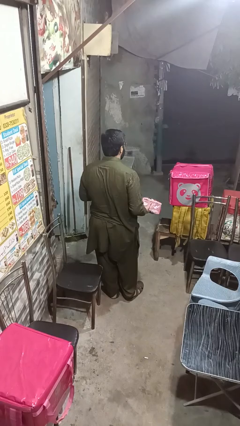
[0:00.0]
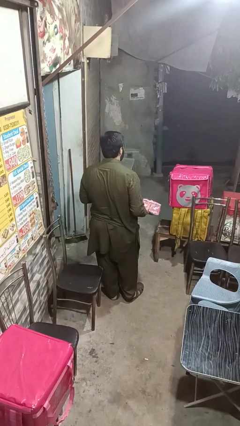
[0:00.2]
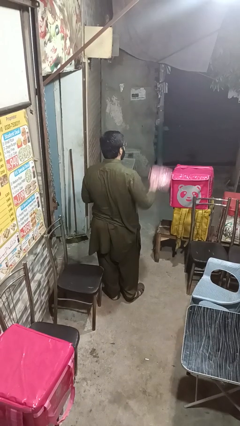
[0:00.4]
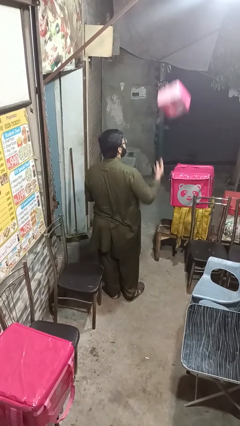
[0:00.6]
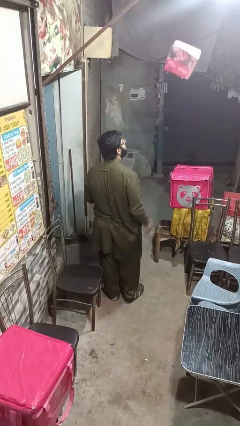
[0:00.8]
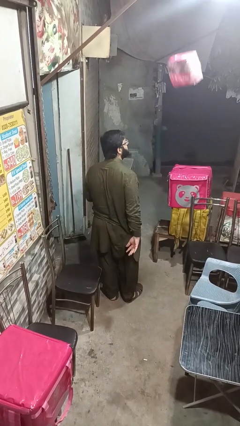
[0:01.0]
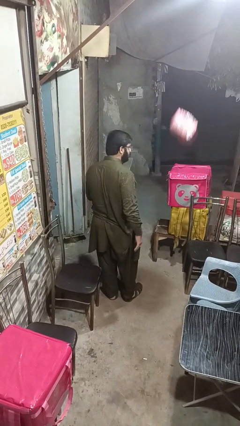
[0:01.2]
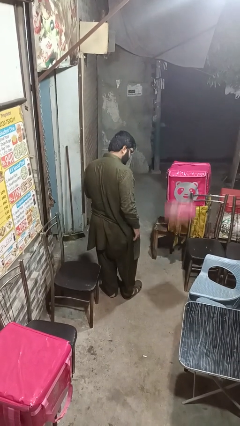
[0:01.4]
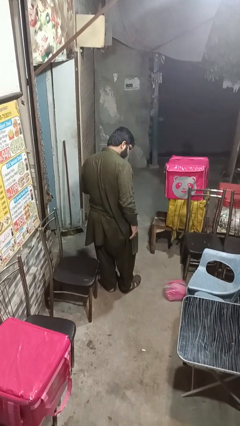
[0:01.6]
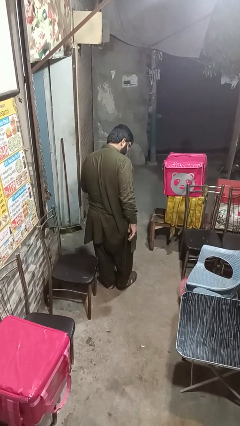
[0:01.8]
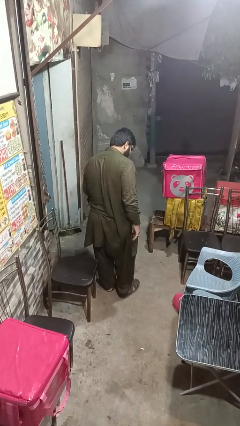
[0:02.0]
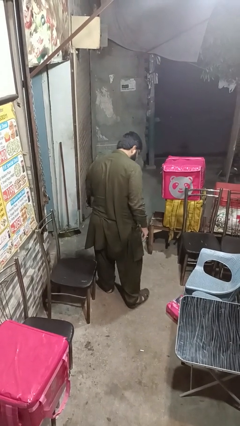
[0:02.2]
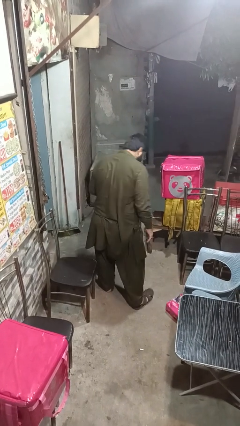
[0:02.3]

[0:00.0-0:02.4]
person throws object into air

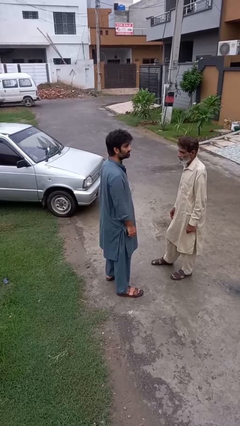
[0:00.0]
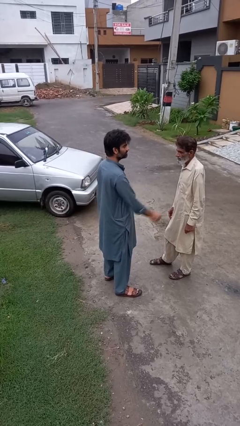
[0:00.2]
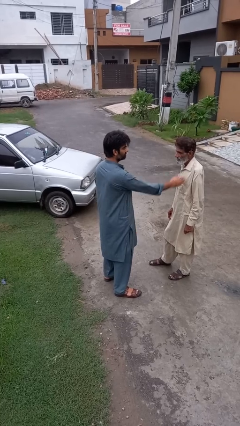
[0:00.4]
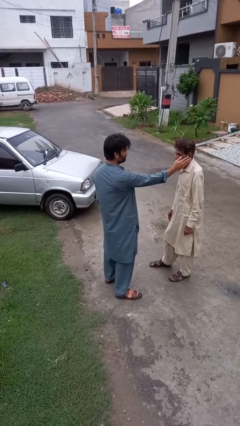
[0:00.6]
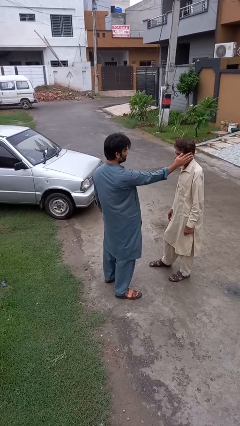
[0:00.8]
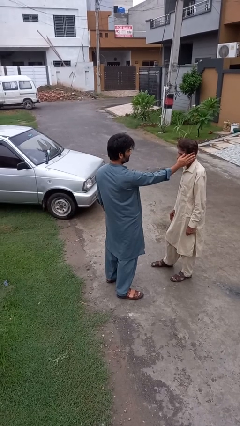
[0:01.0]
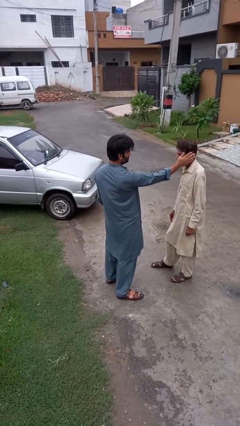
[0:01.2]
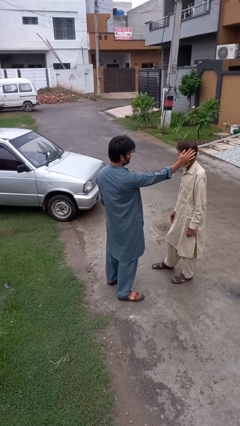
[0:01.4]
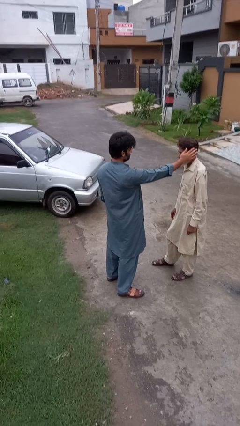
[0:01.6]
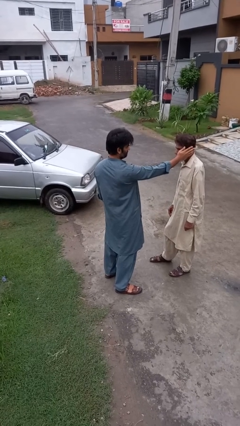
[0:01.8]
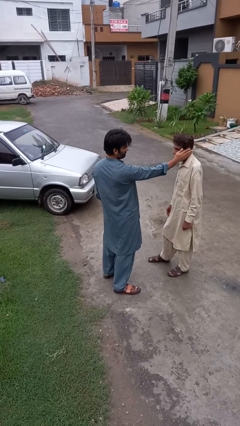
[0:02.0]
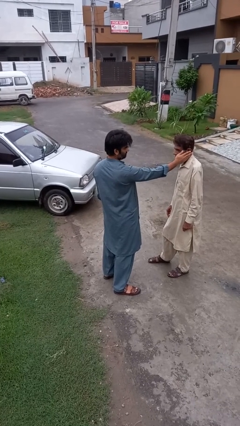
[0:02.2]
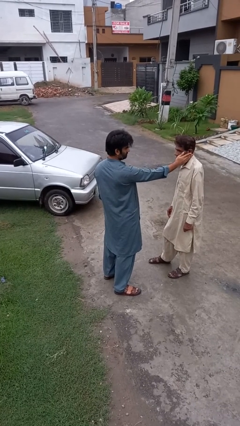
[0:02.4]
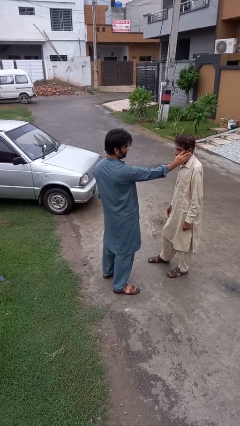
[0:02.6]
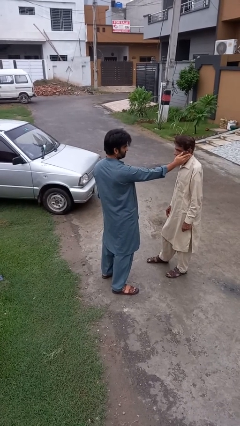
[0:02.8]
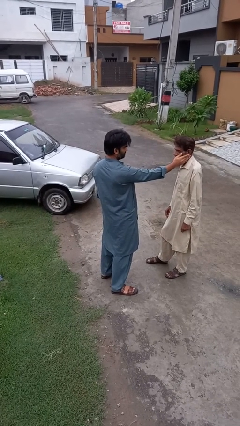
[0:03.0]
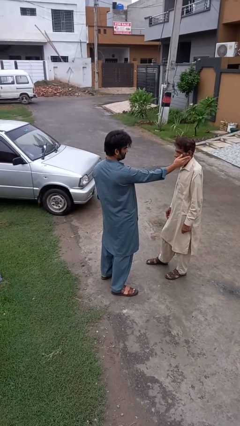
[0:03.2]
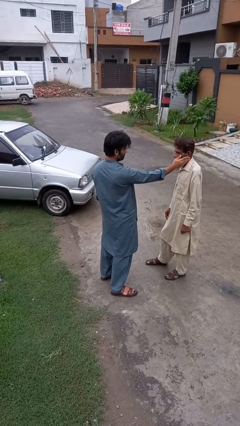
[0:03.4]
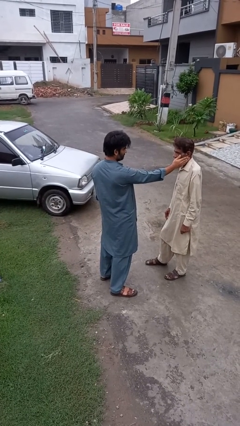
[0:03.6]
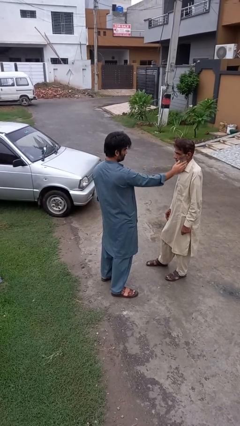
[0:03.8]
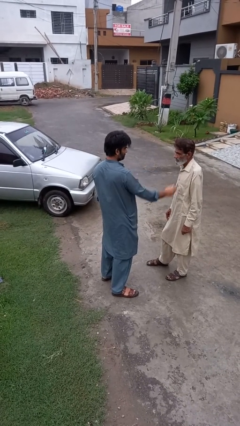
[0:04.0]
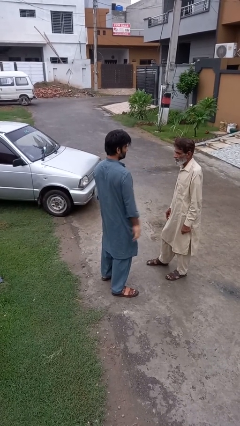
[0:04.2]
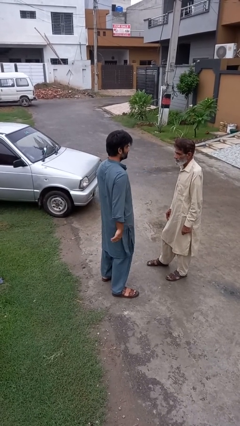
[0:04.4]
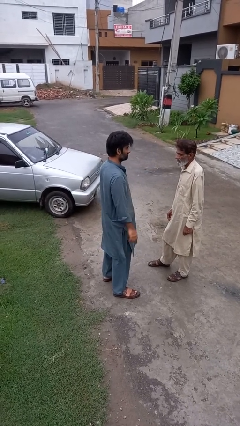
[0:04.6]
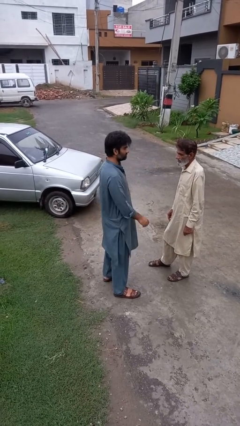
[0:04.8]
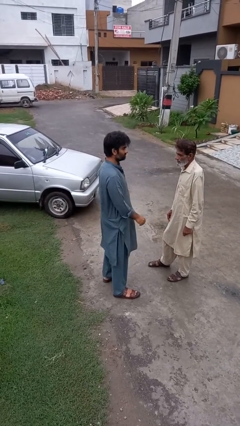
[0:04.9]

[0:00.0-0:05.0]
person touches face of person

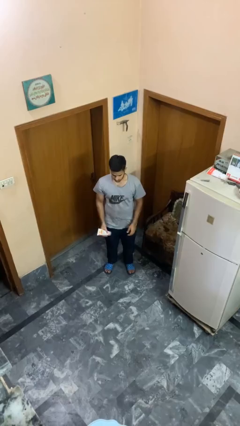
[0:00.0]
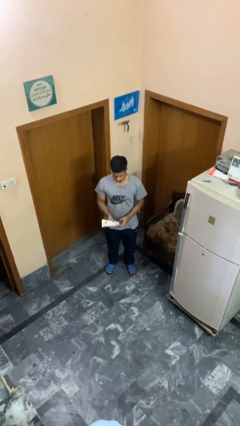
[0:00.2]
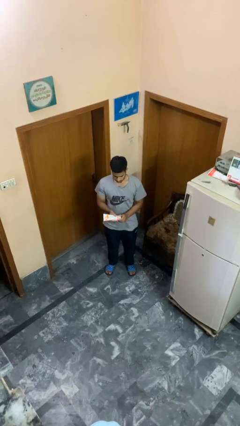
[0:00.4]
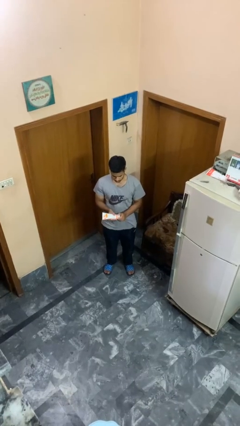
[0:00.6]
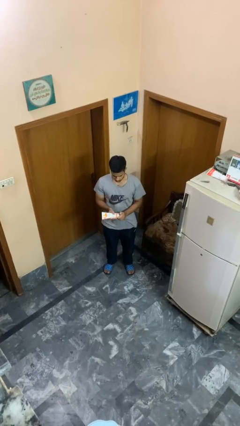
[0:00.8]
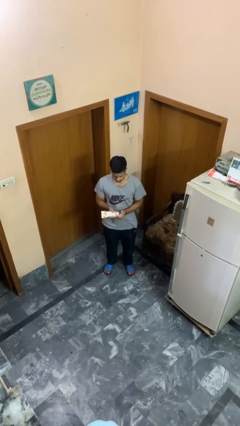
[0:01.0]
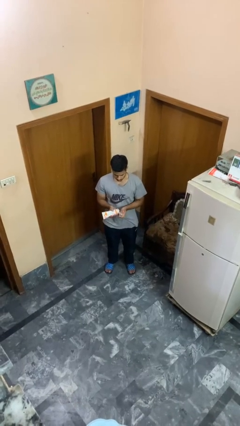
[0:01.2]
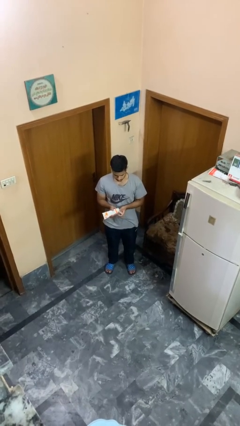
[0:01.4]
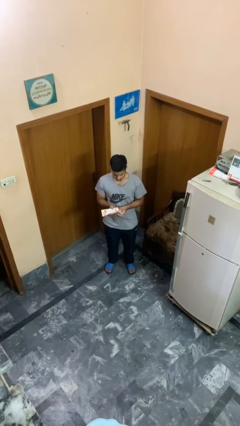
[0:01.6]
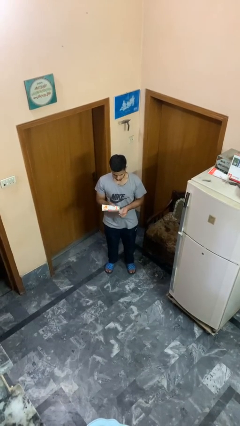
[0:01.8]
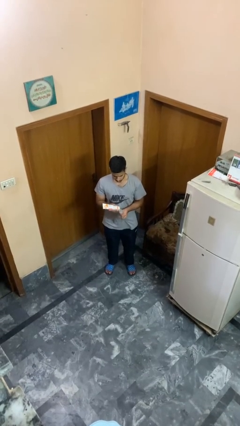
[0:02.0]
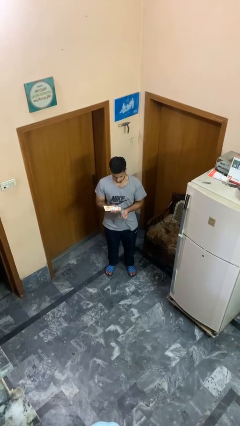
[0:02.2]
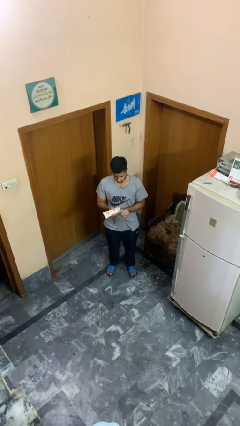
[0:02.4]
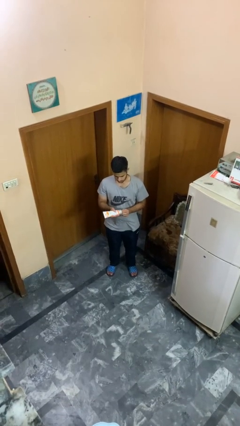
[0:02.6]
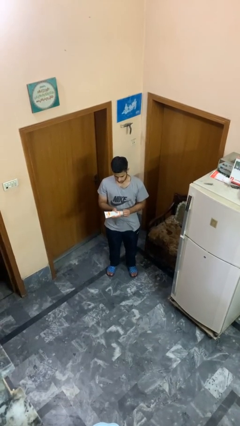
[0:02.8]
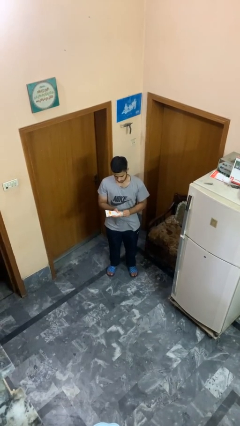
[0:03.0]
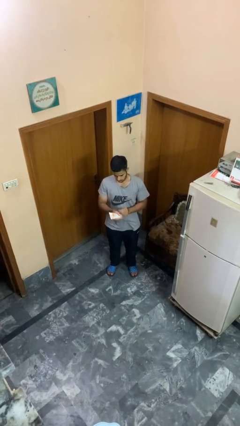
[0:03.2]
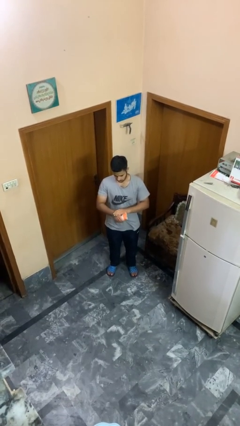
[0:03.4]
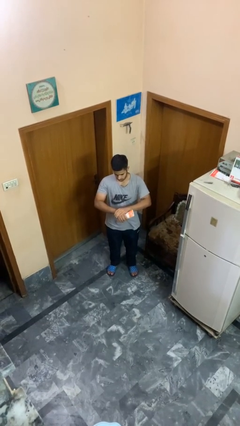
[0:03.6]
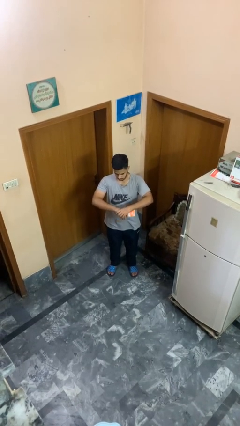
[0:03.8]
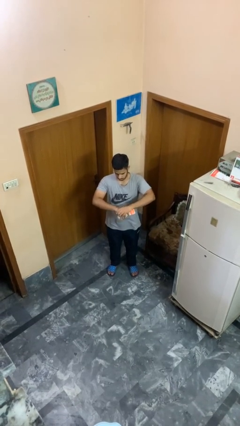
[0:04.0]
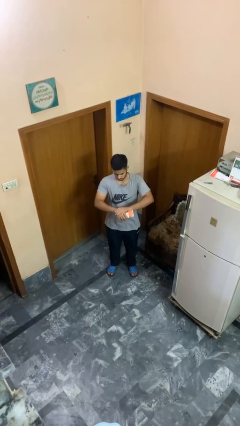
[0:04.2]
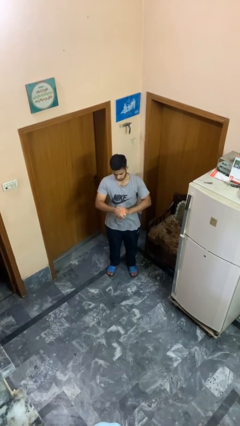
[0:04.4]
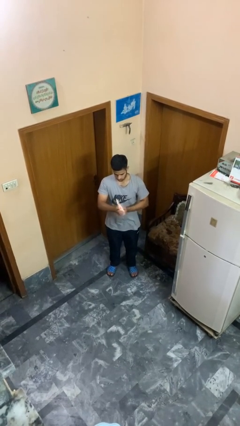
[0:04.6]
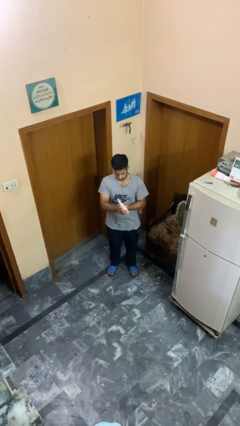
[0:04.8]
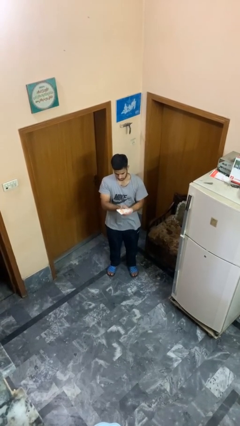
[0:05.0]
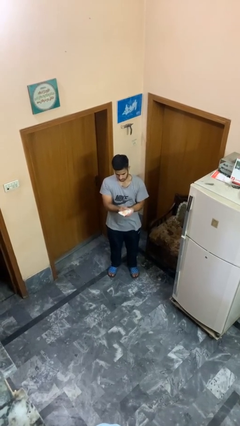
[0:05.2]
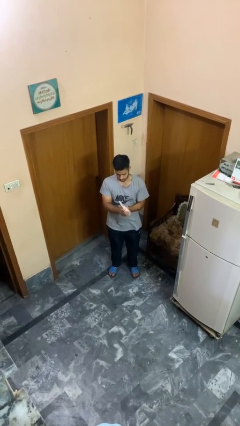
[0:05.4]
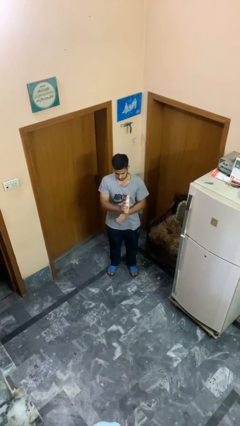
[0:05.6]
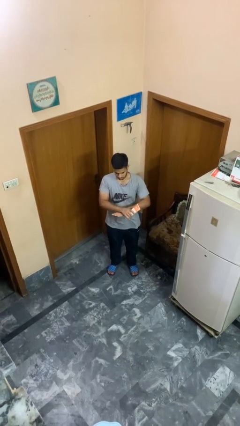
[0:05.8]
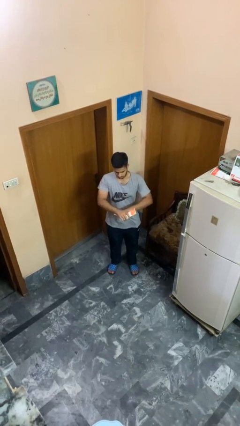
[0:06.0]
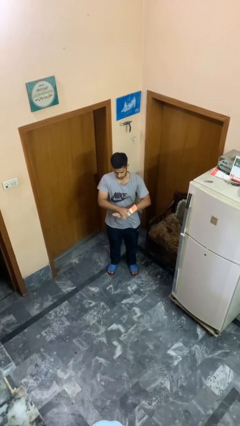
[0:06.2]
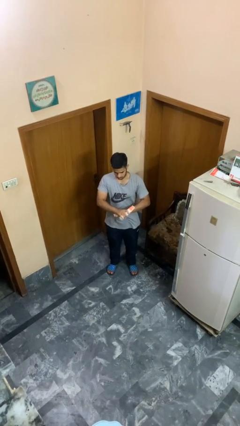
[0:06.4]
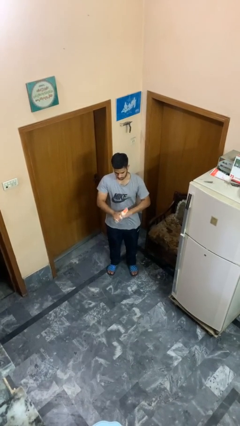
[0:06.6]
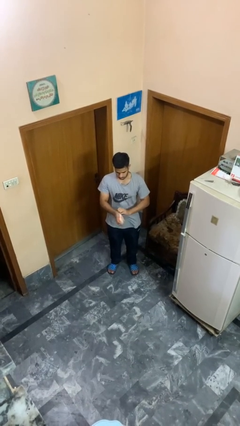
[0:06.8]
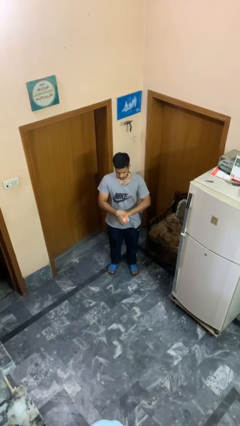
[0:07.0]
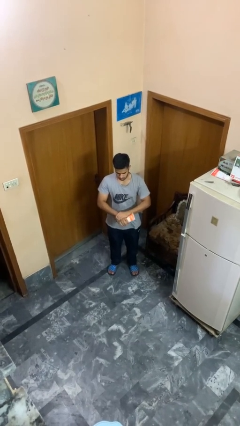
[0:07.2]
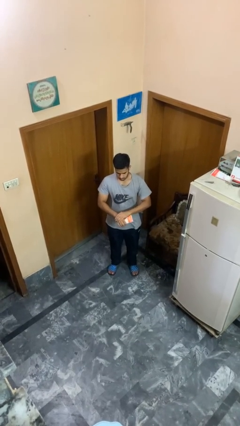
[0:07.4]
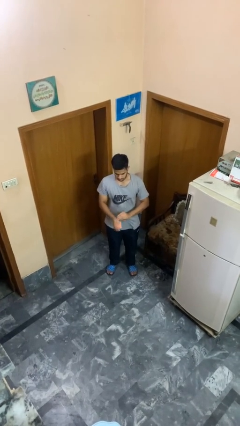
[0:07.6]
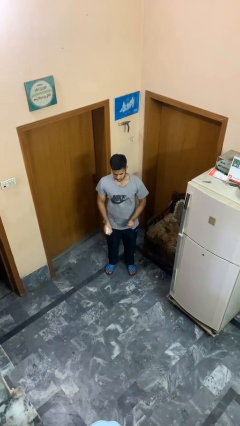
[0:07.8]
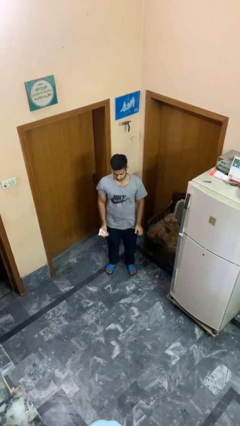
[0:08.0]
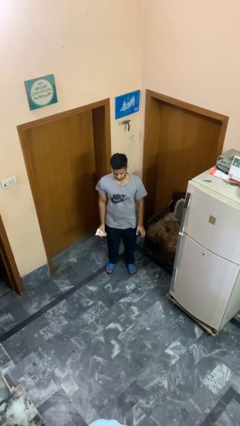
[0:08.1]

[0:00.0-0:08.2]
person applies sunscreen

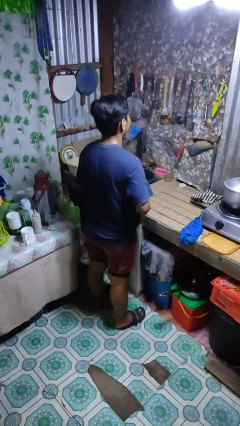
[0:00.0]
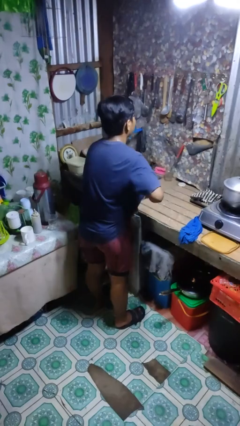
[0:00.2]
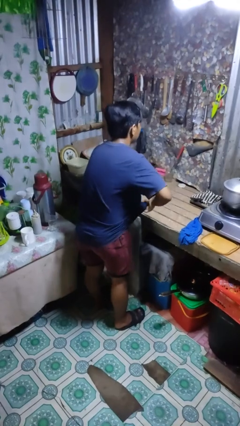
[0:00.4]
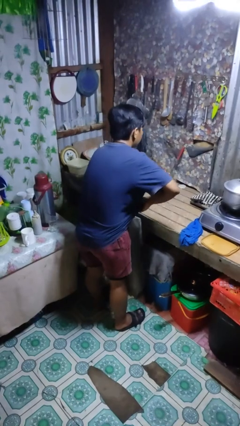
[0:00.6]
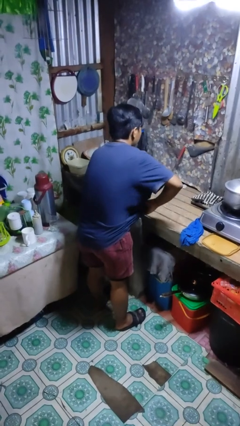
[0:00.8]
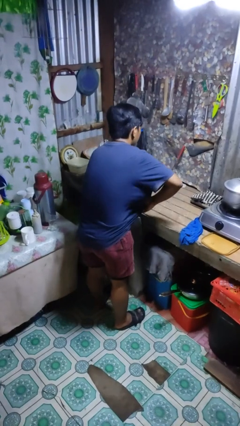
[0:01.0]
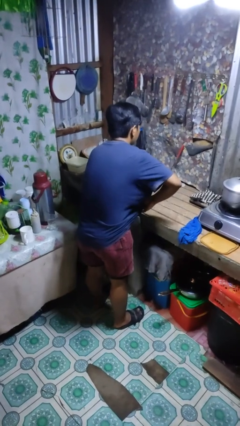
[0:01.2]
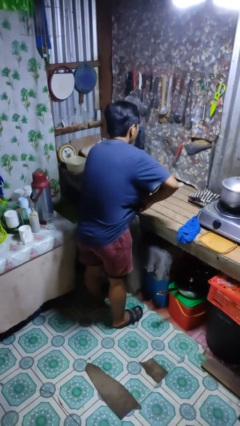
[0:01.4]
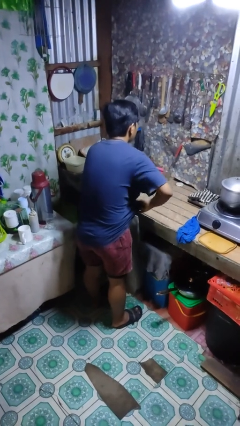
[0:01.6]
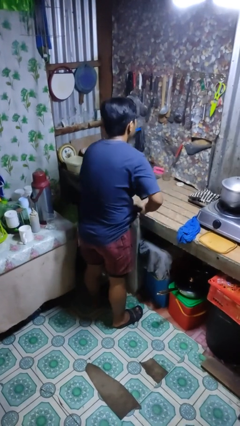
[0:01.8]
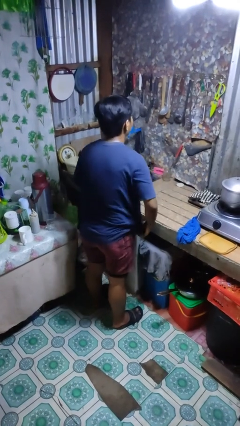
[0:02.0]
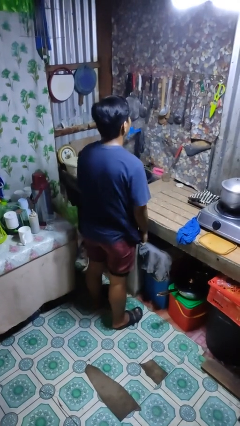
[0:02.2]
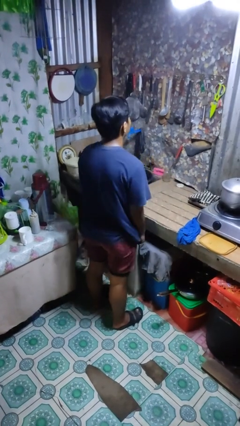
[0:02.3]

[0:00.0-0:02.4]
person applies deodorant
